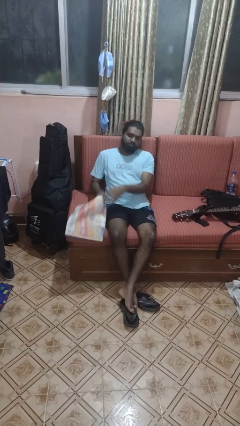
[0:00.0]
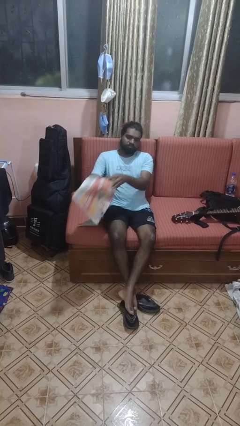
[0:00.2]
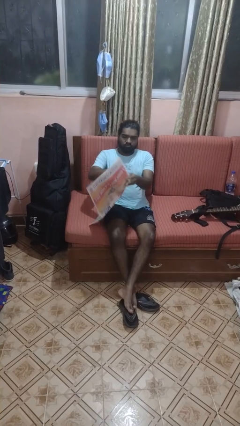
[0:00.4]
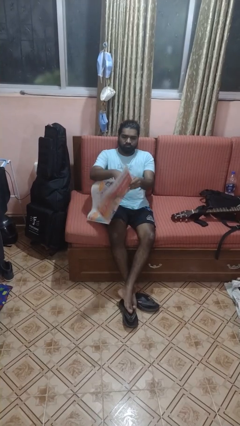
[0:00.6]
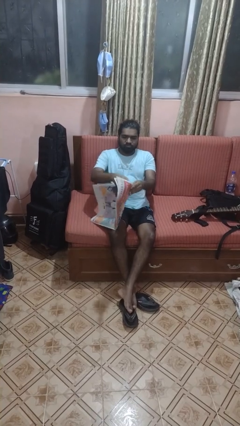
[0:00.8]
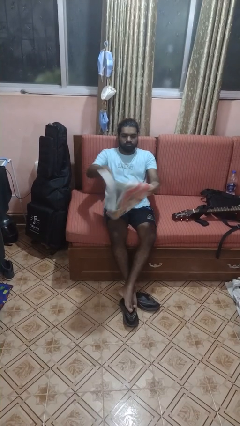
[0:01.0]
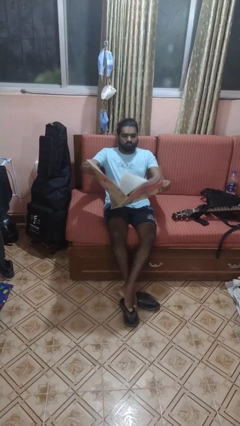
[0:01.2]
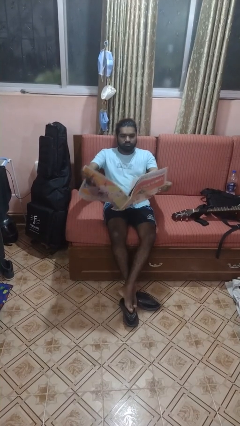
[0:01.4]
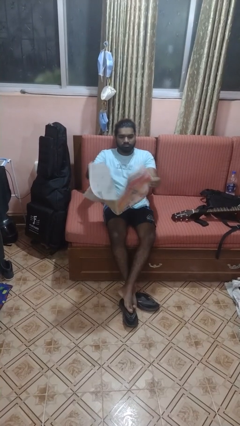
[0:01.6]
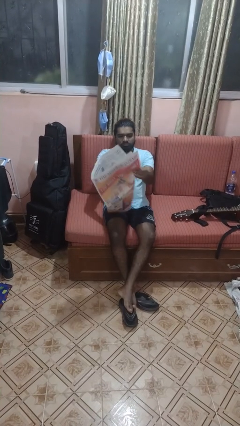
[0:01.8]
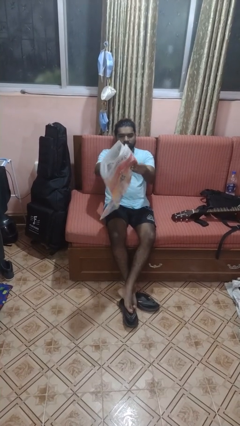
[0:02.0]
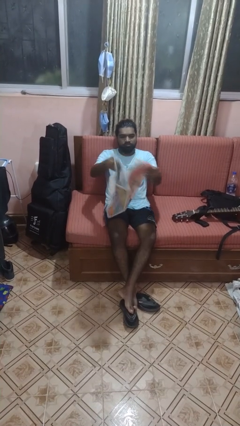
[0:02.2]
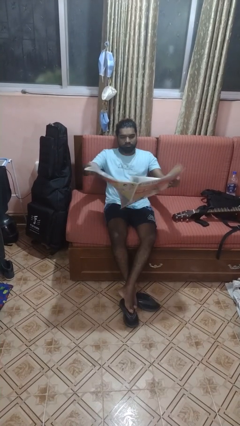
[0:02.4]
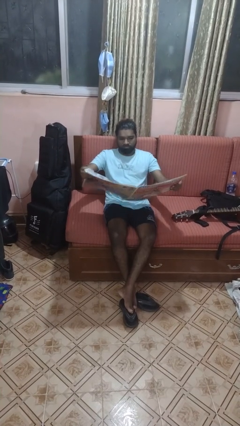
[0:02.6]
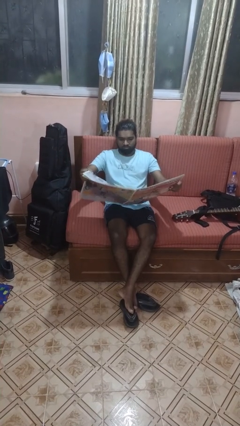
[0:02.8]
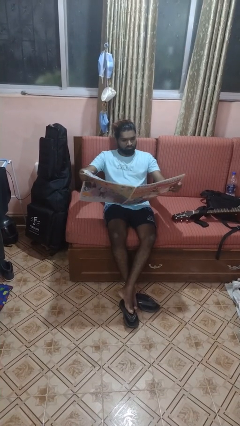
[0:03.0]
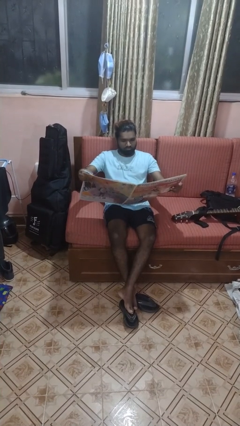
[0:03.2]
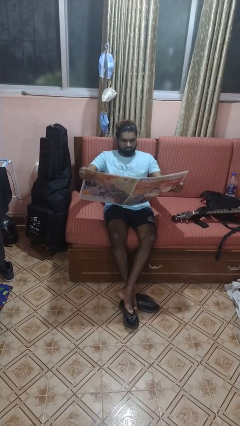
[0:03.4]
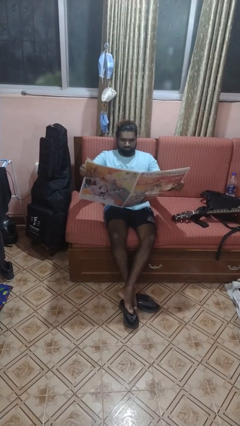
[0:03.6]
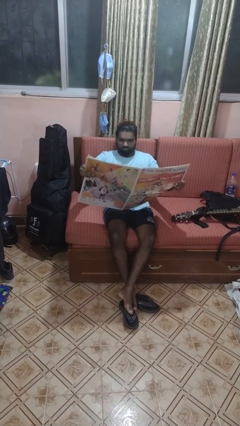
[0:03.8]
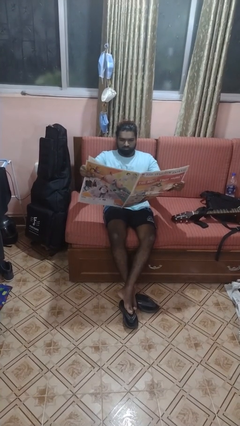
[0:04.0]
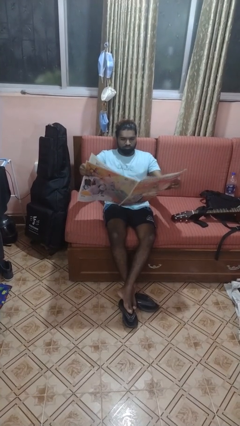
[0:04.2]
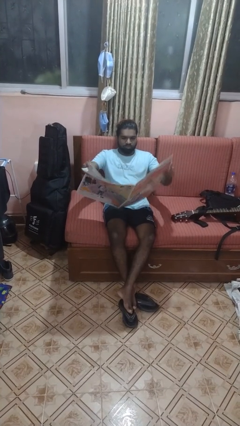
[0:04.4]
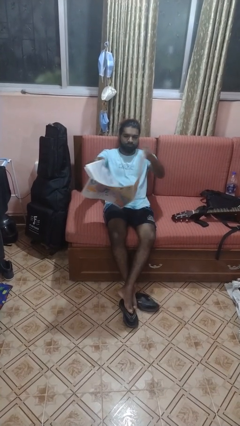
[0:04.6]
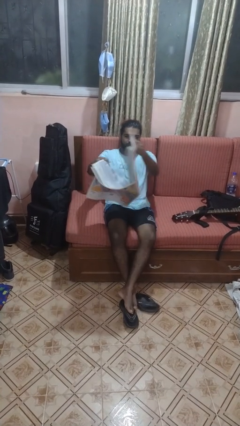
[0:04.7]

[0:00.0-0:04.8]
person reads newspaper

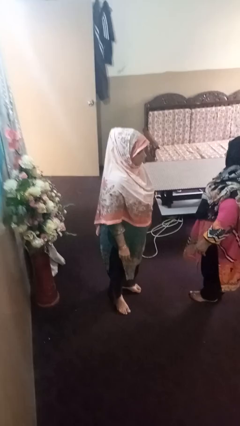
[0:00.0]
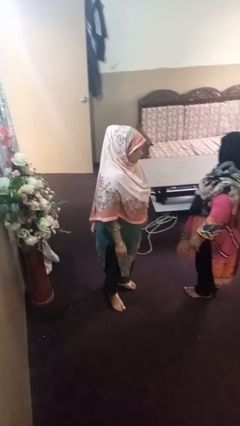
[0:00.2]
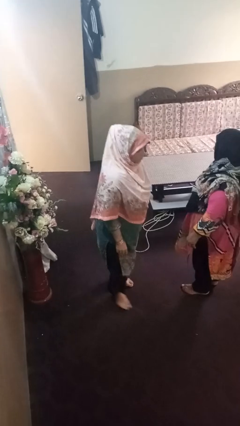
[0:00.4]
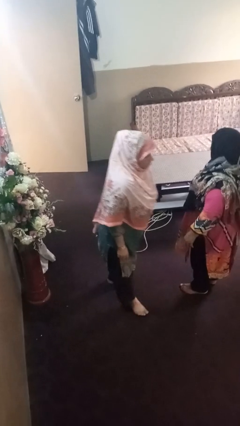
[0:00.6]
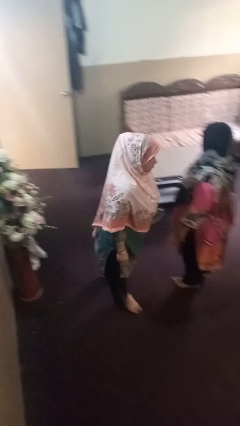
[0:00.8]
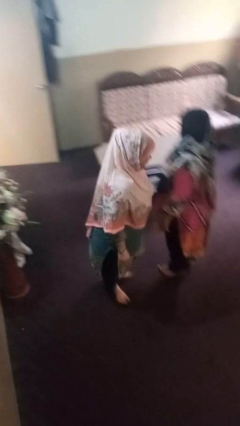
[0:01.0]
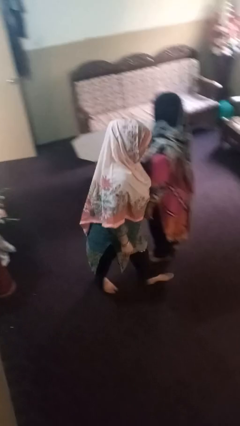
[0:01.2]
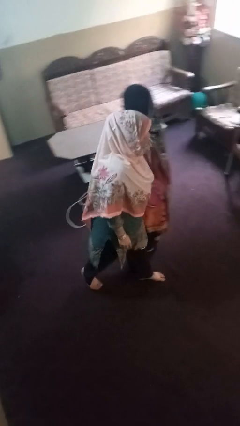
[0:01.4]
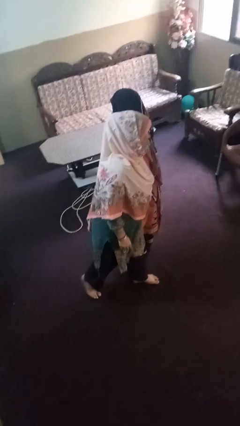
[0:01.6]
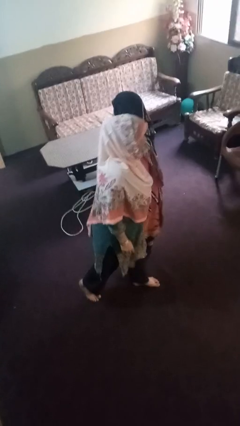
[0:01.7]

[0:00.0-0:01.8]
person shoves person

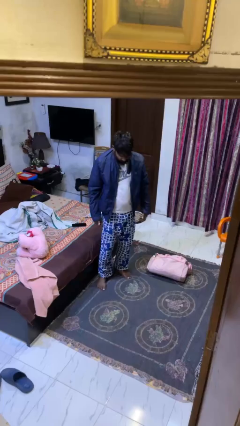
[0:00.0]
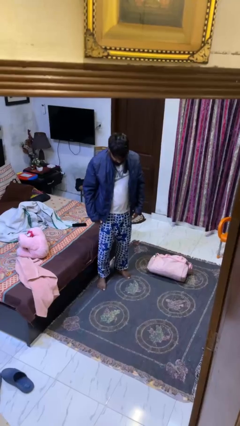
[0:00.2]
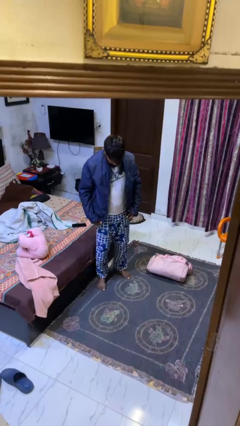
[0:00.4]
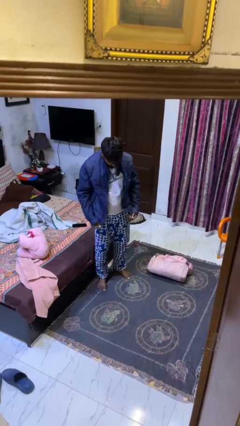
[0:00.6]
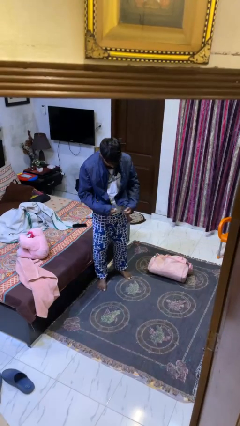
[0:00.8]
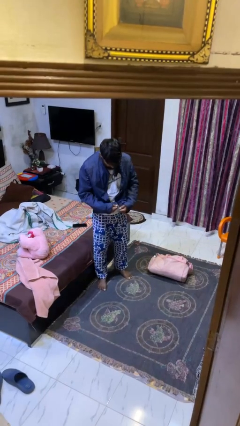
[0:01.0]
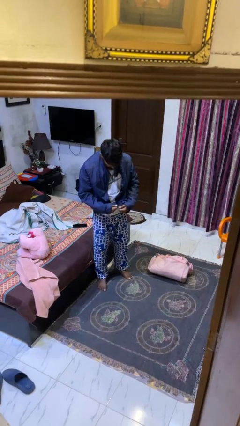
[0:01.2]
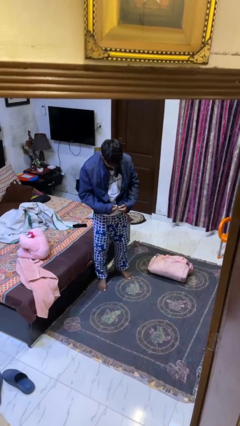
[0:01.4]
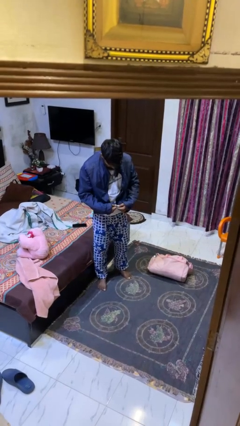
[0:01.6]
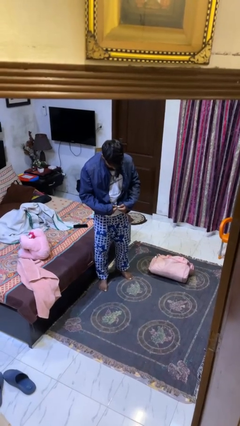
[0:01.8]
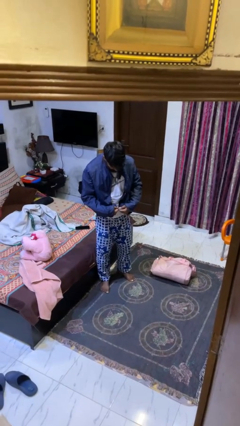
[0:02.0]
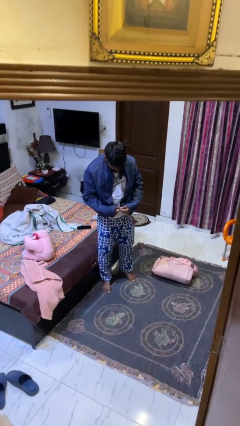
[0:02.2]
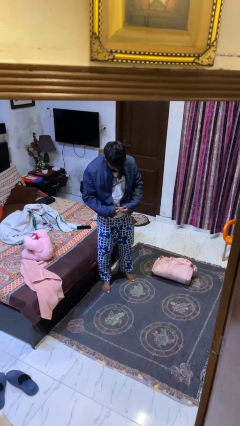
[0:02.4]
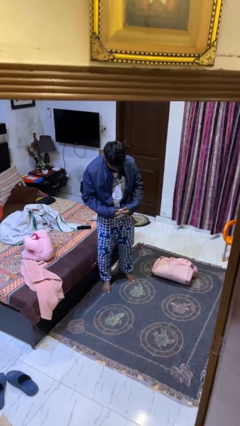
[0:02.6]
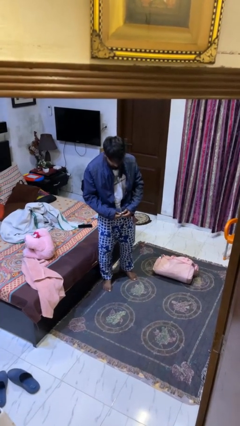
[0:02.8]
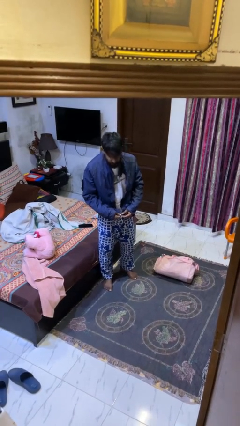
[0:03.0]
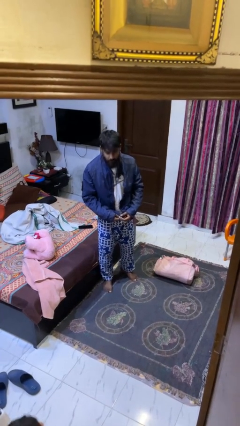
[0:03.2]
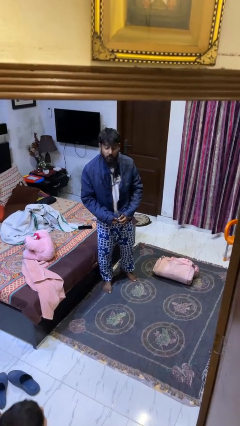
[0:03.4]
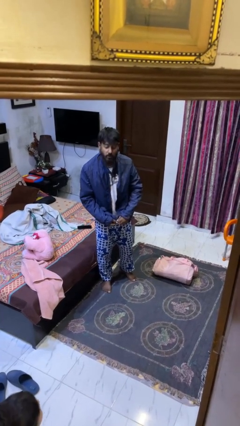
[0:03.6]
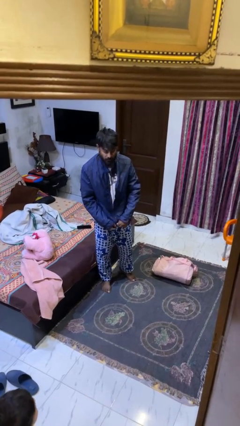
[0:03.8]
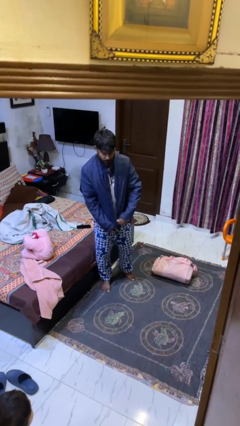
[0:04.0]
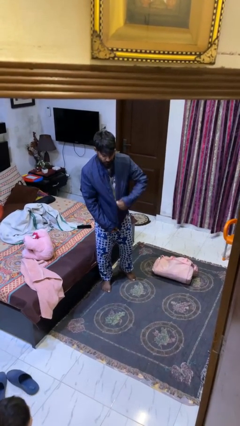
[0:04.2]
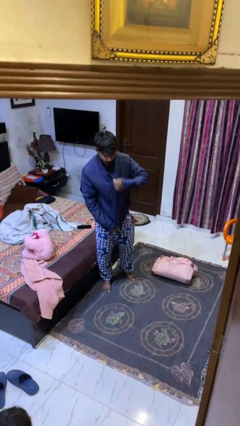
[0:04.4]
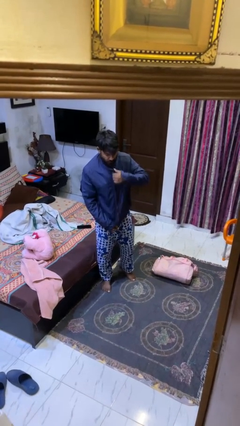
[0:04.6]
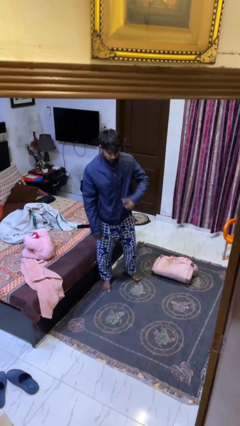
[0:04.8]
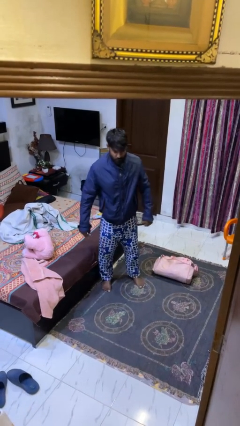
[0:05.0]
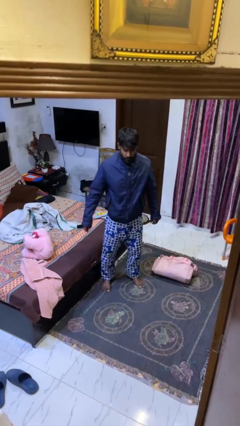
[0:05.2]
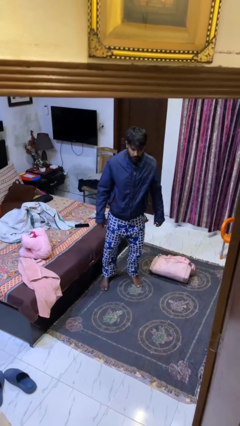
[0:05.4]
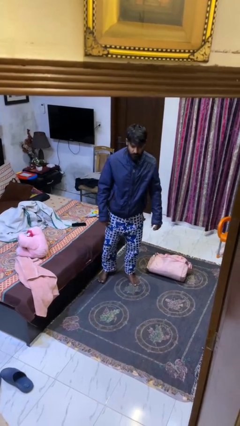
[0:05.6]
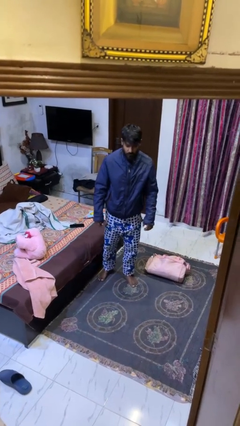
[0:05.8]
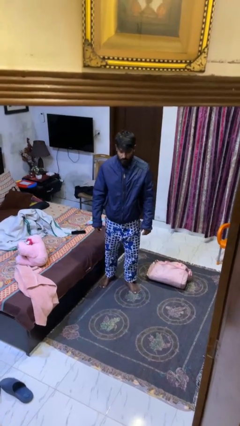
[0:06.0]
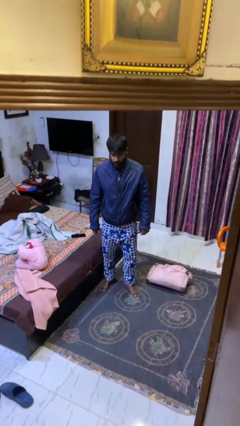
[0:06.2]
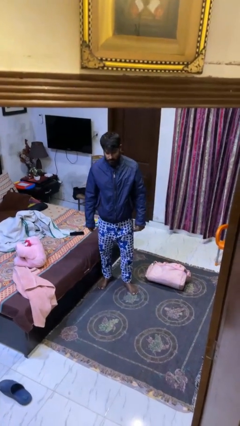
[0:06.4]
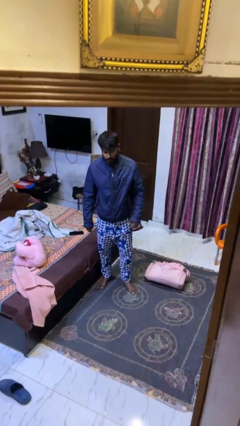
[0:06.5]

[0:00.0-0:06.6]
person zips up jacket

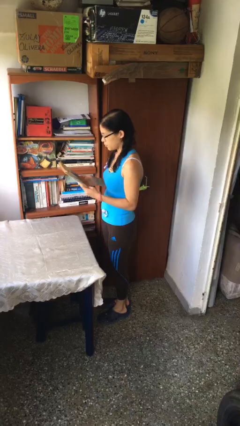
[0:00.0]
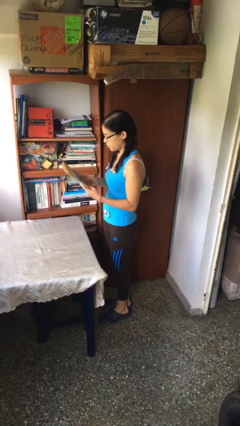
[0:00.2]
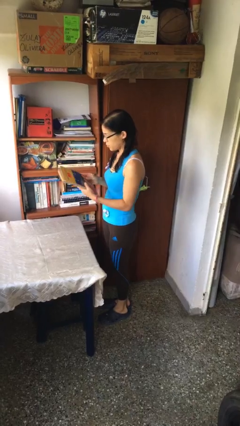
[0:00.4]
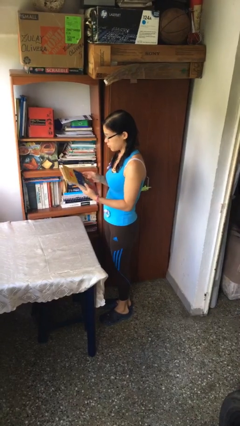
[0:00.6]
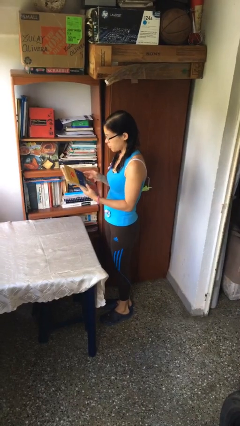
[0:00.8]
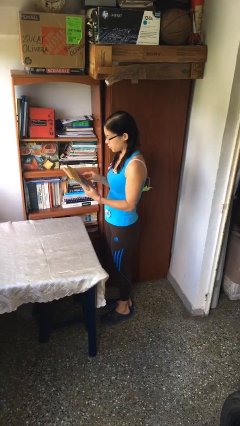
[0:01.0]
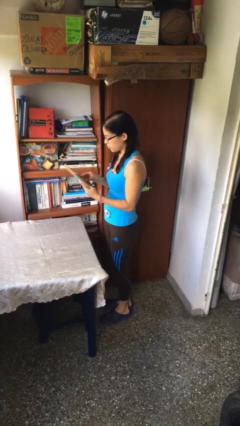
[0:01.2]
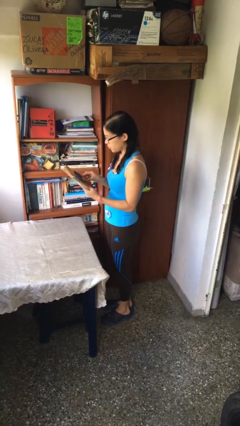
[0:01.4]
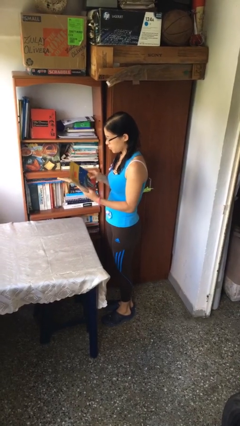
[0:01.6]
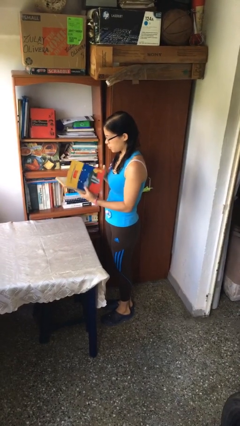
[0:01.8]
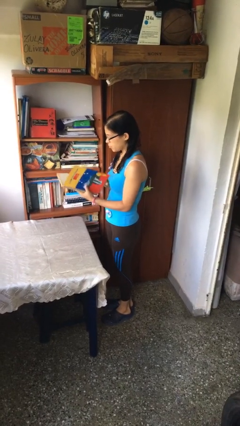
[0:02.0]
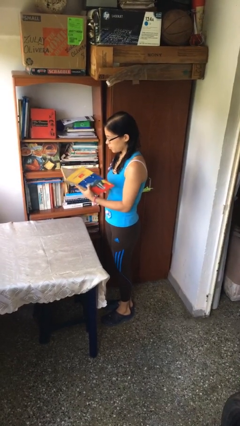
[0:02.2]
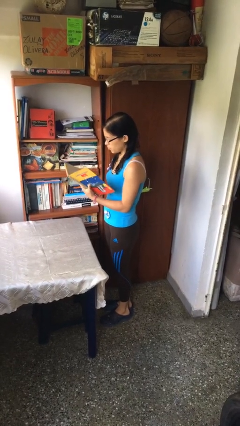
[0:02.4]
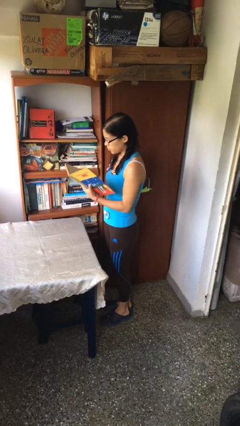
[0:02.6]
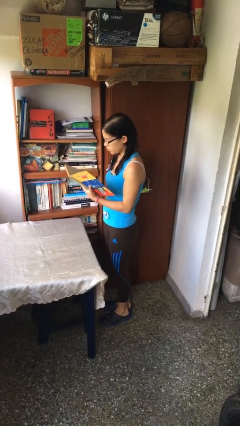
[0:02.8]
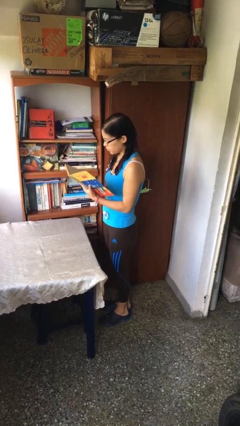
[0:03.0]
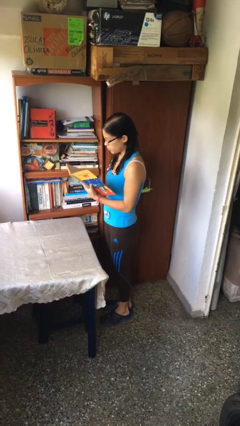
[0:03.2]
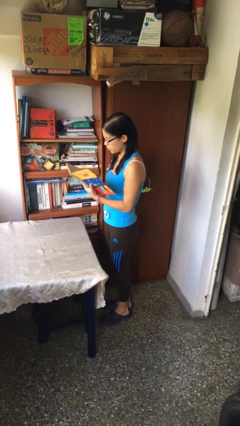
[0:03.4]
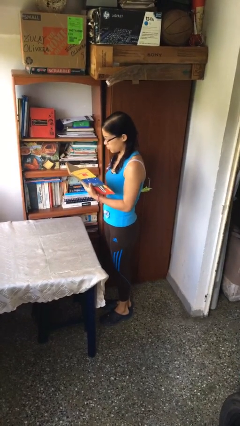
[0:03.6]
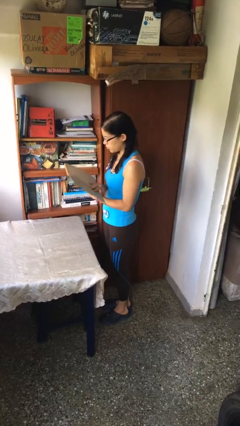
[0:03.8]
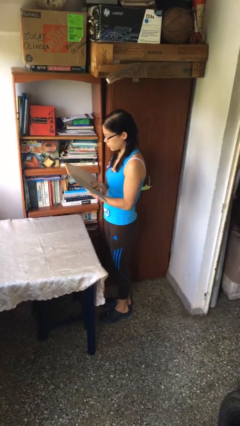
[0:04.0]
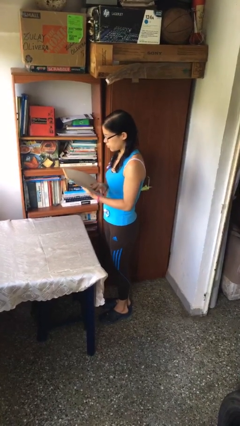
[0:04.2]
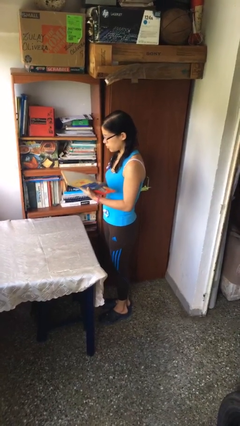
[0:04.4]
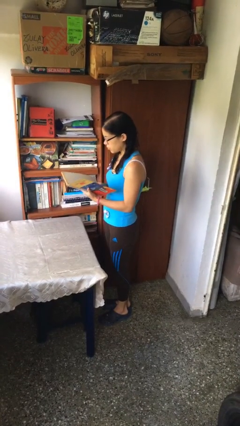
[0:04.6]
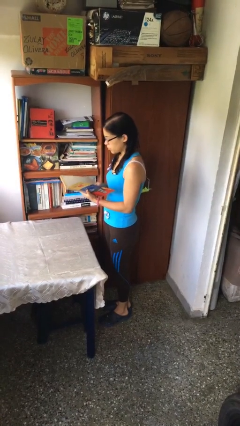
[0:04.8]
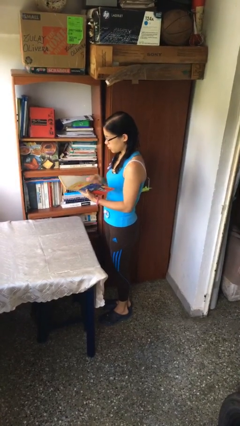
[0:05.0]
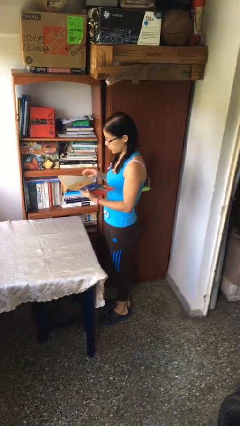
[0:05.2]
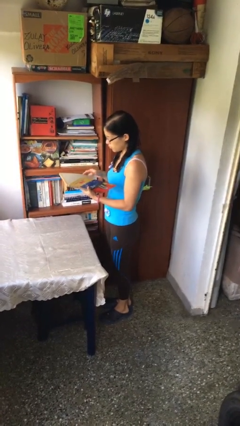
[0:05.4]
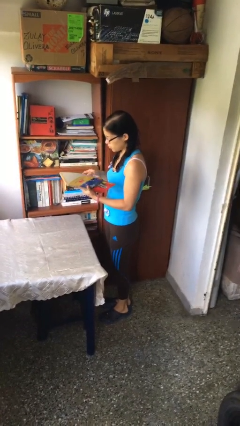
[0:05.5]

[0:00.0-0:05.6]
person reads document
